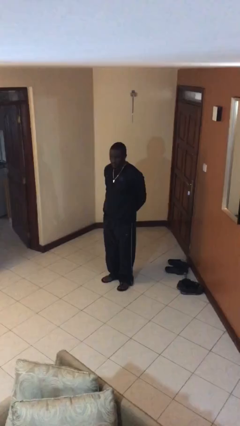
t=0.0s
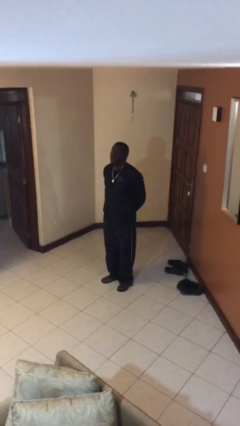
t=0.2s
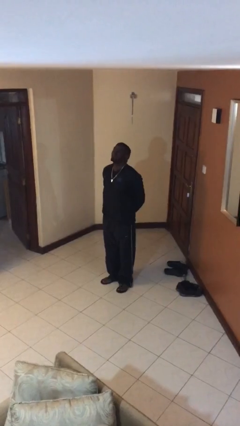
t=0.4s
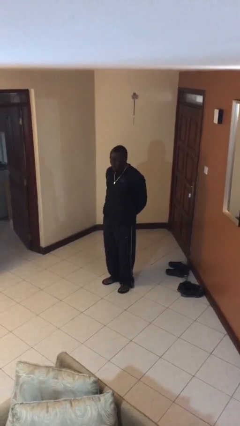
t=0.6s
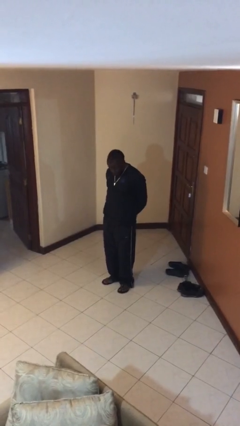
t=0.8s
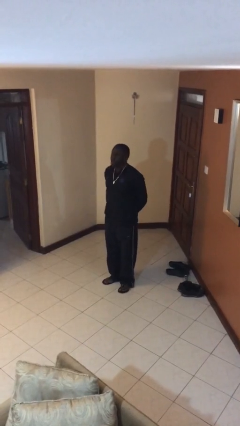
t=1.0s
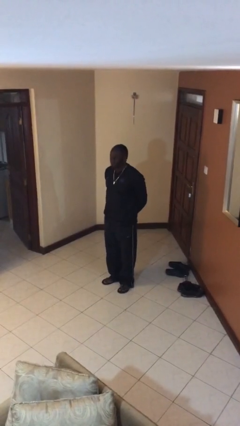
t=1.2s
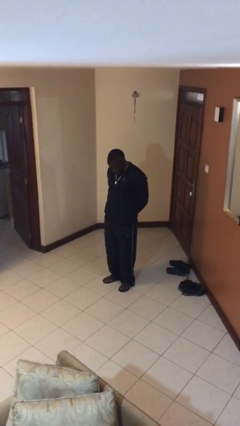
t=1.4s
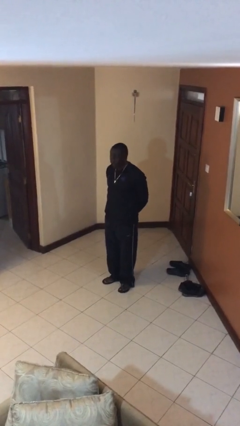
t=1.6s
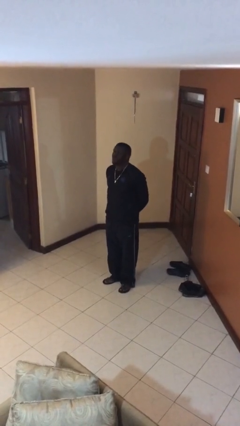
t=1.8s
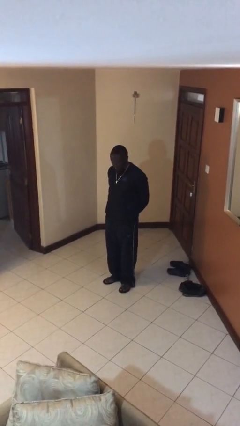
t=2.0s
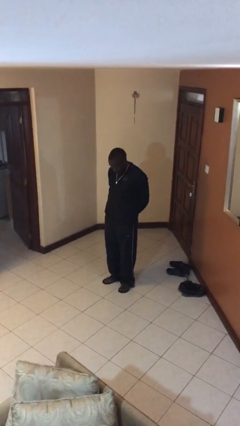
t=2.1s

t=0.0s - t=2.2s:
person nods head

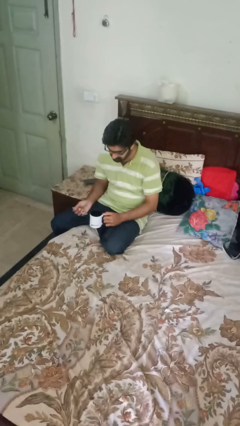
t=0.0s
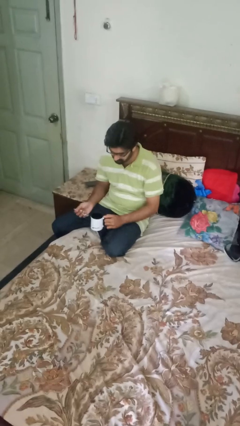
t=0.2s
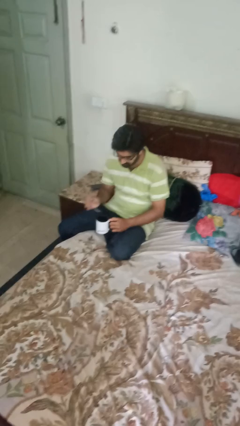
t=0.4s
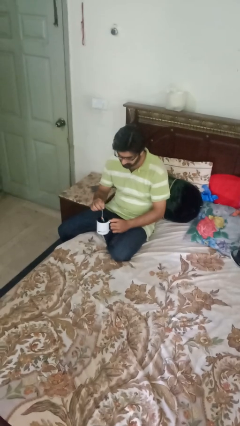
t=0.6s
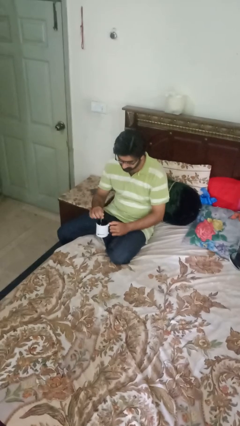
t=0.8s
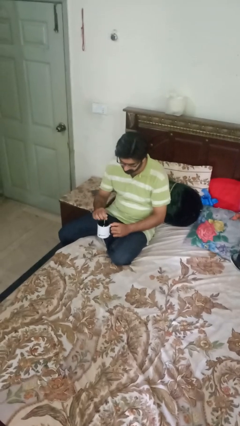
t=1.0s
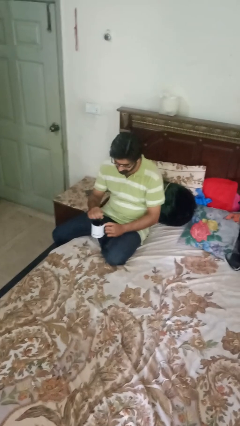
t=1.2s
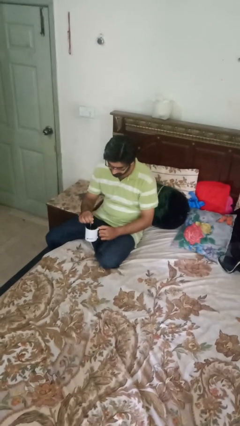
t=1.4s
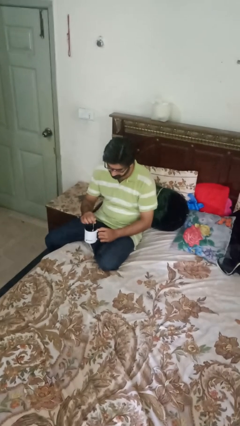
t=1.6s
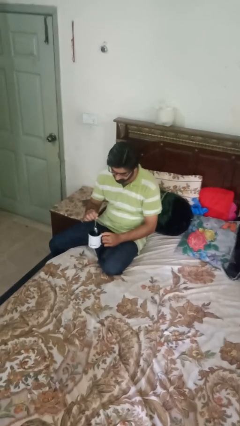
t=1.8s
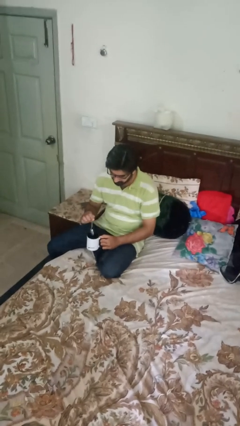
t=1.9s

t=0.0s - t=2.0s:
person stirs mug

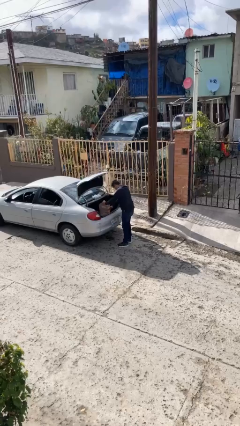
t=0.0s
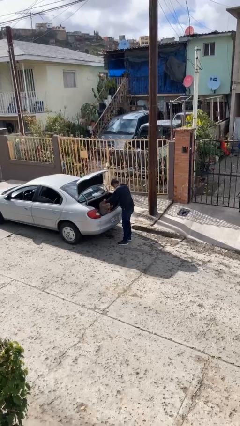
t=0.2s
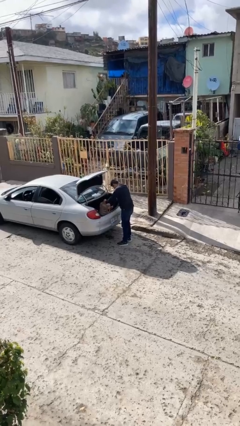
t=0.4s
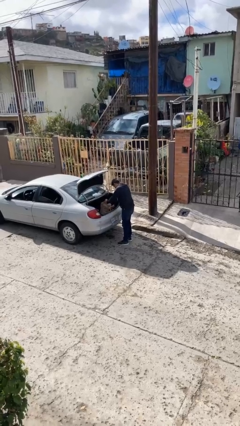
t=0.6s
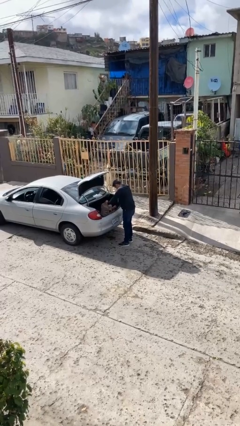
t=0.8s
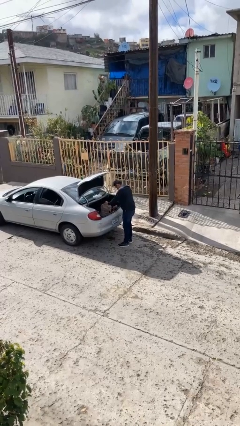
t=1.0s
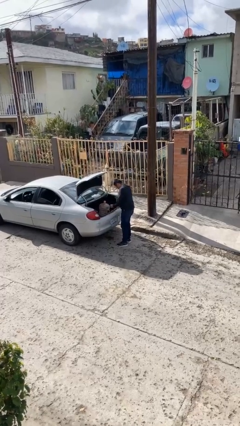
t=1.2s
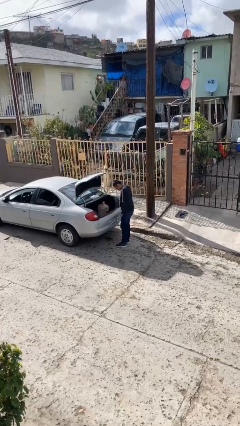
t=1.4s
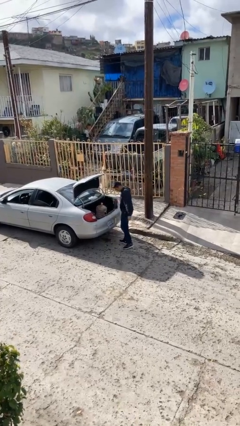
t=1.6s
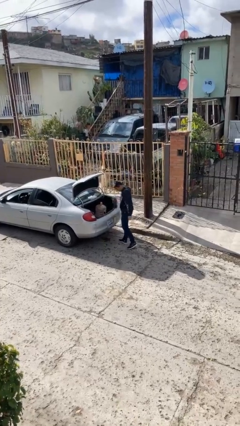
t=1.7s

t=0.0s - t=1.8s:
person loads car

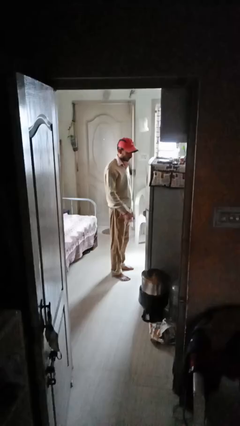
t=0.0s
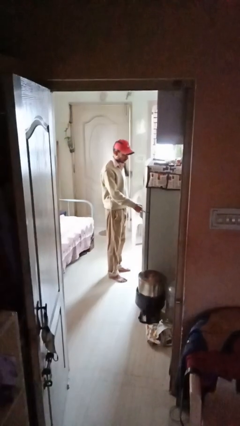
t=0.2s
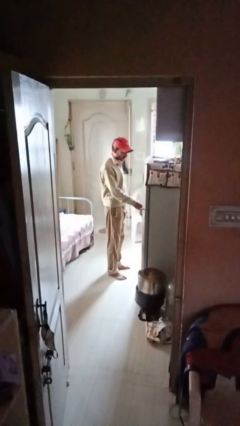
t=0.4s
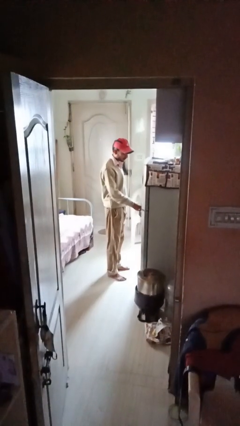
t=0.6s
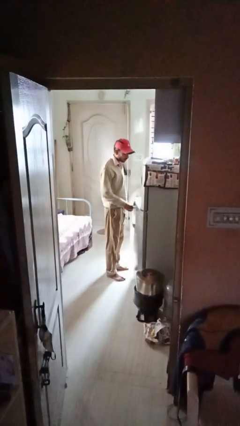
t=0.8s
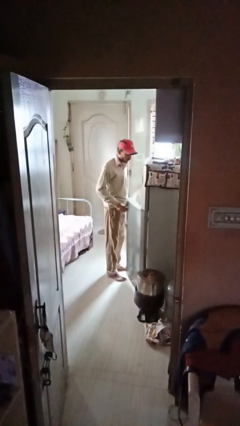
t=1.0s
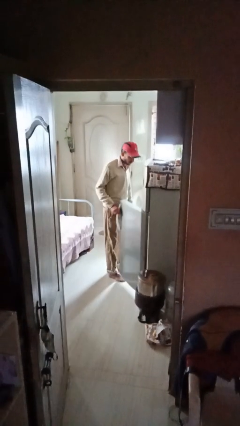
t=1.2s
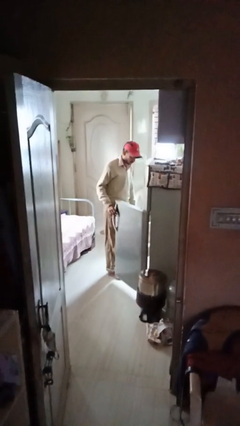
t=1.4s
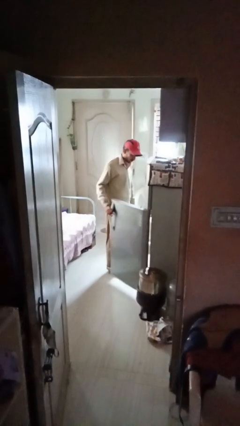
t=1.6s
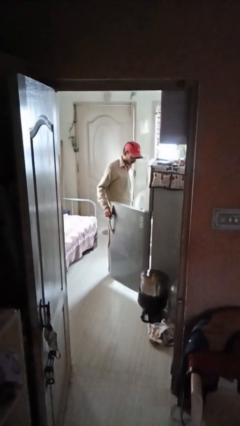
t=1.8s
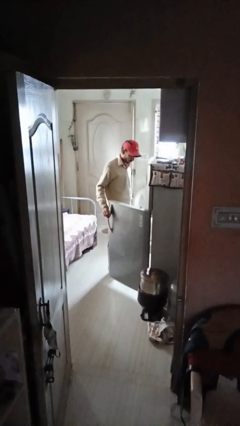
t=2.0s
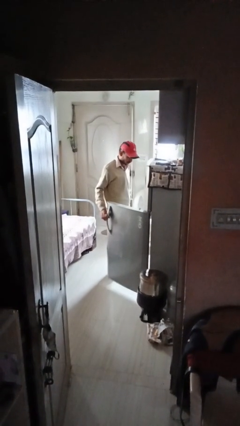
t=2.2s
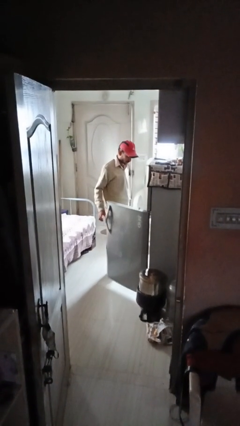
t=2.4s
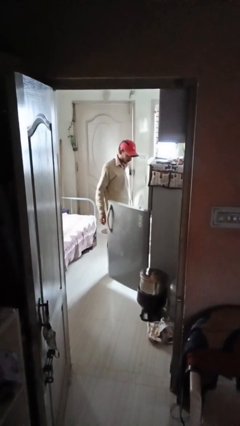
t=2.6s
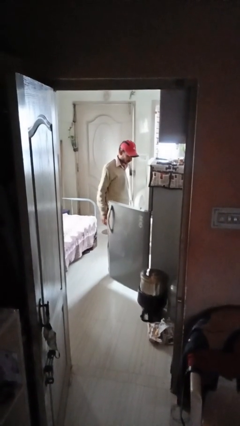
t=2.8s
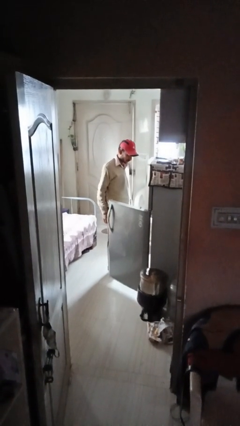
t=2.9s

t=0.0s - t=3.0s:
person opens refrigerator

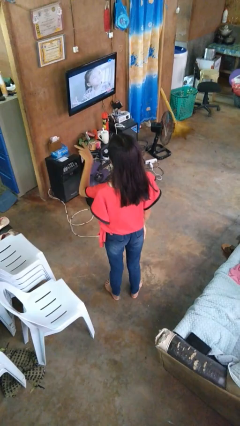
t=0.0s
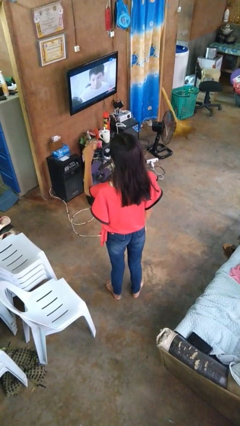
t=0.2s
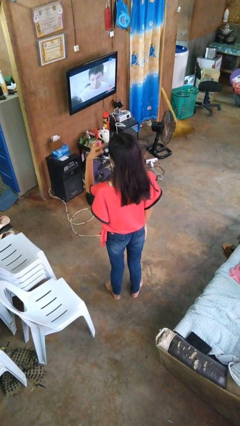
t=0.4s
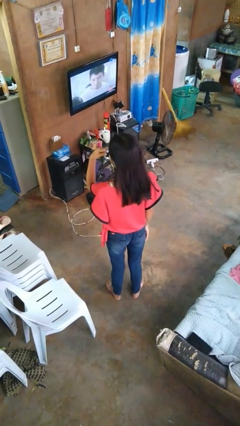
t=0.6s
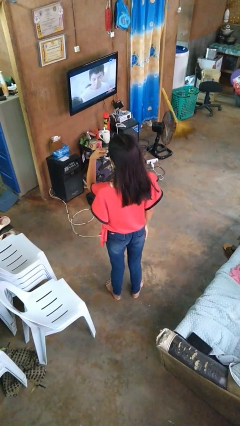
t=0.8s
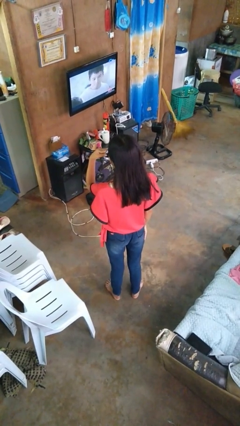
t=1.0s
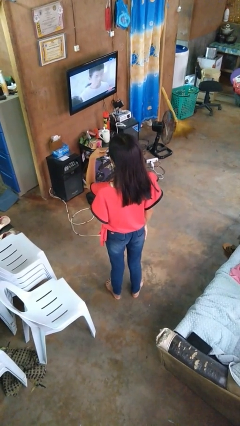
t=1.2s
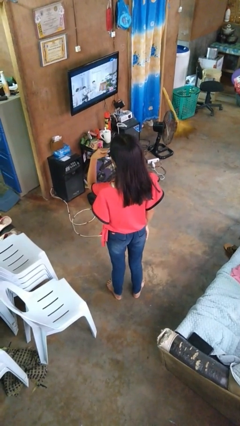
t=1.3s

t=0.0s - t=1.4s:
person gestures watch closely

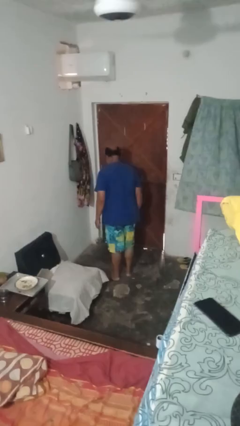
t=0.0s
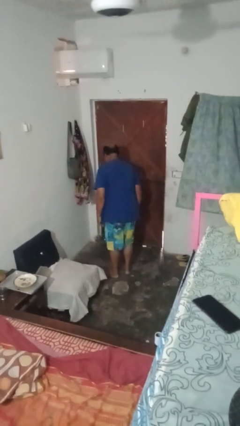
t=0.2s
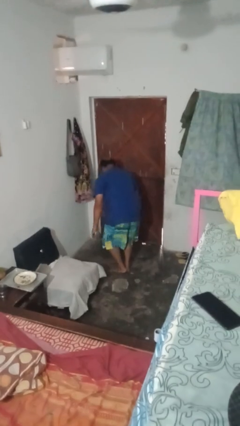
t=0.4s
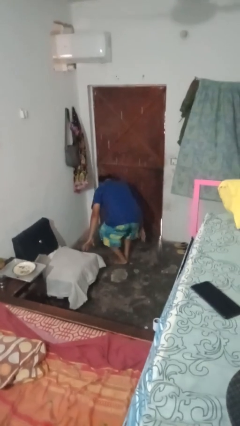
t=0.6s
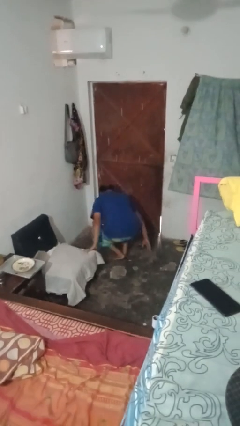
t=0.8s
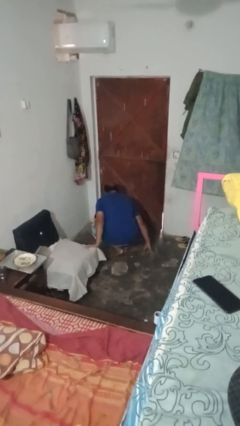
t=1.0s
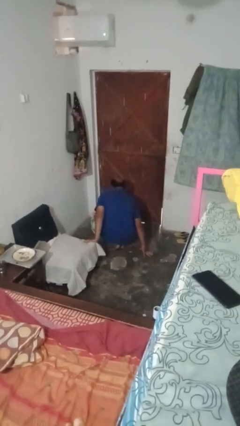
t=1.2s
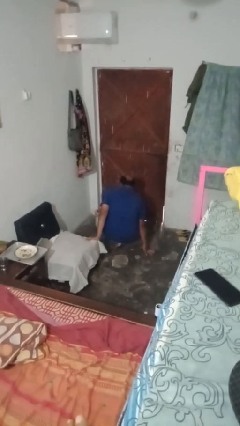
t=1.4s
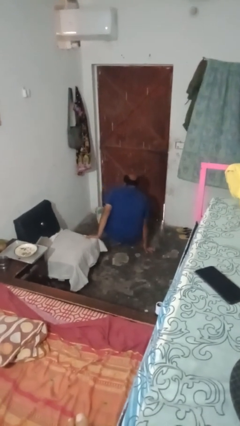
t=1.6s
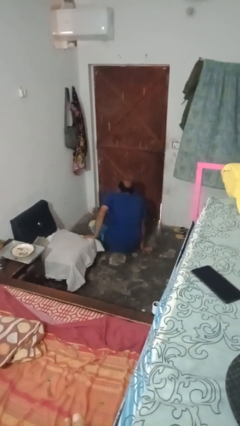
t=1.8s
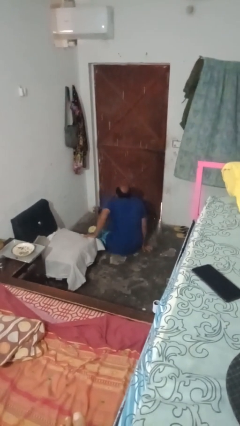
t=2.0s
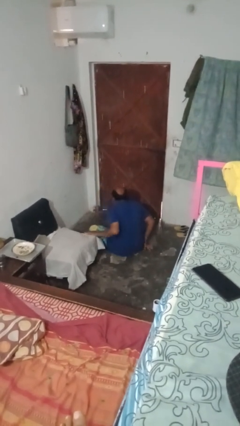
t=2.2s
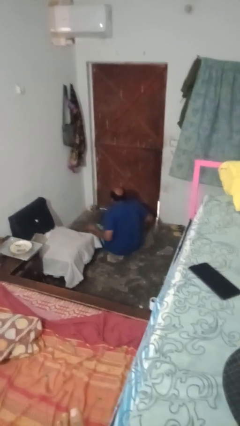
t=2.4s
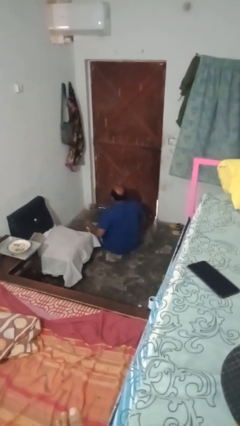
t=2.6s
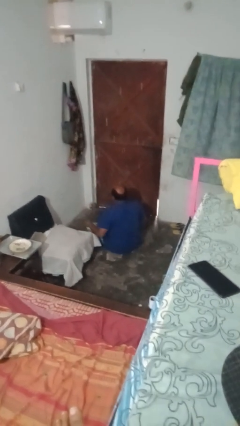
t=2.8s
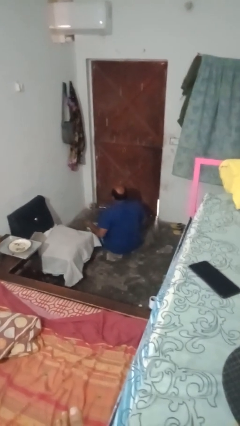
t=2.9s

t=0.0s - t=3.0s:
person crosses legs

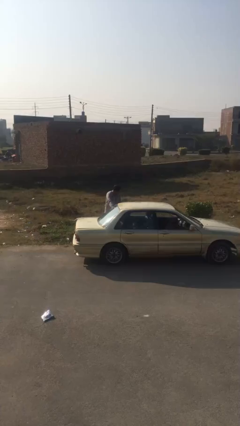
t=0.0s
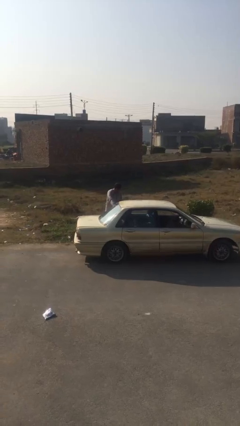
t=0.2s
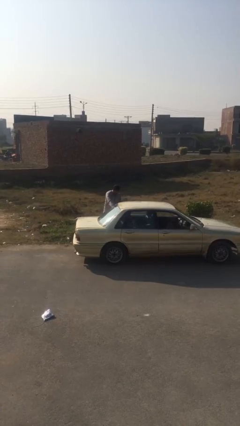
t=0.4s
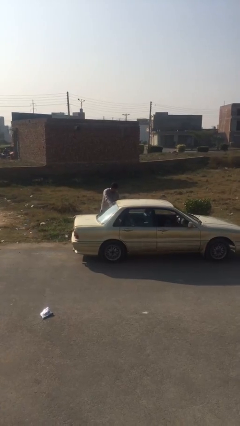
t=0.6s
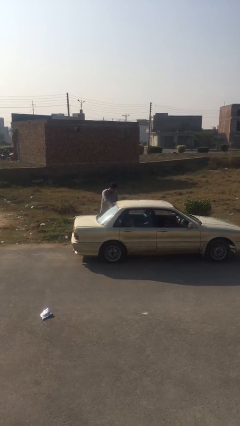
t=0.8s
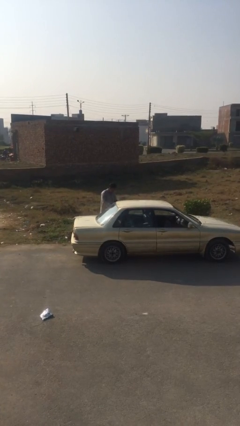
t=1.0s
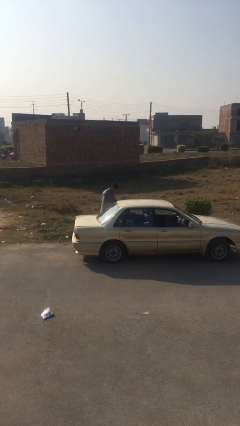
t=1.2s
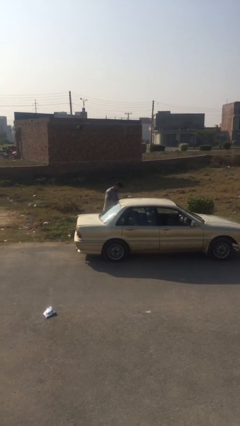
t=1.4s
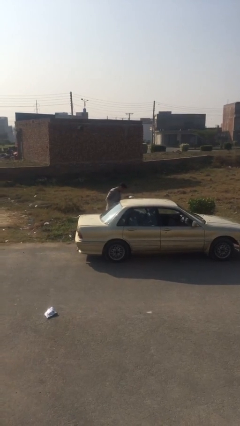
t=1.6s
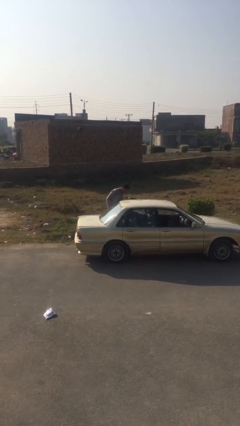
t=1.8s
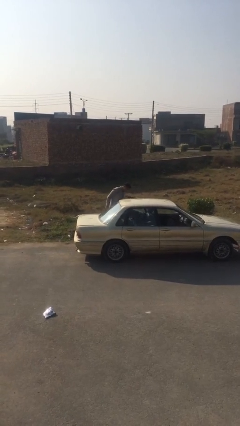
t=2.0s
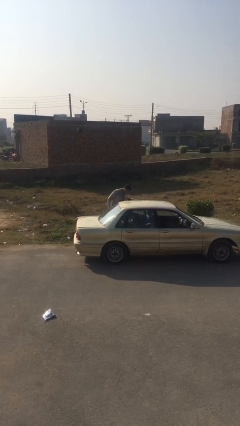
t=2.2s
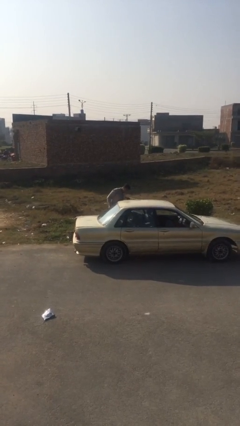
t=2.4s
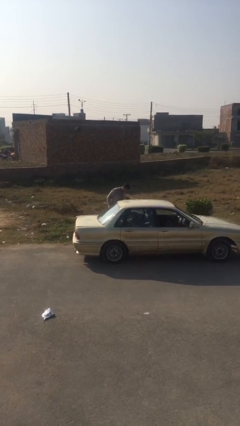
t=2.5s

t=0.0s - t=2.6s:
person opens car door

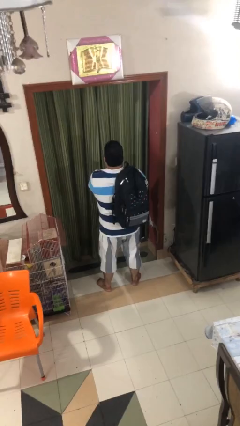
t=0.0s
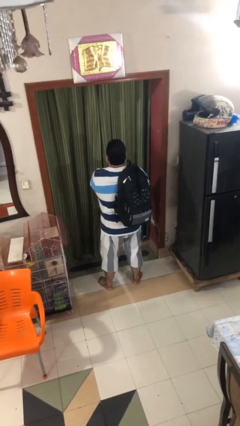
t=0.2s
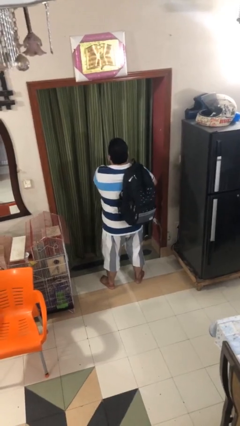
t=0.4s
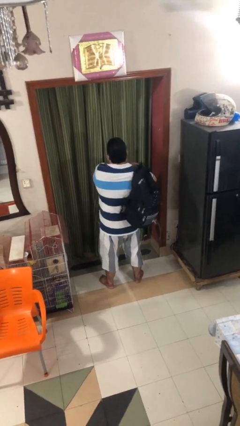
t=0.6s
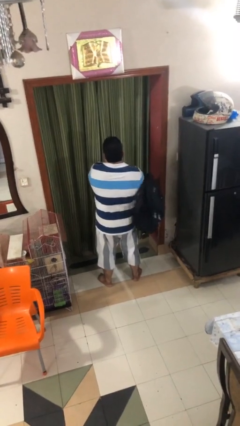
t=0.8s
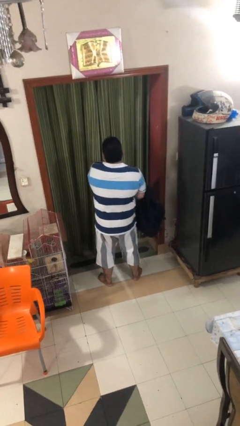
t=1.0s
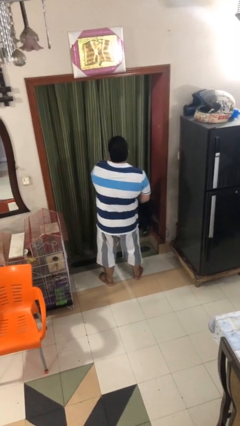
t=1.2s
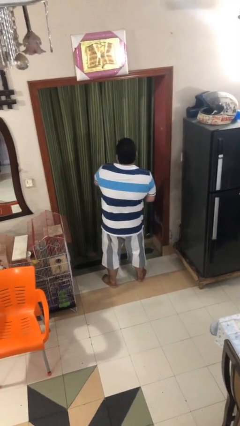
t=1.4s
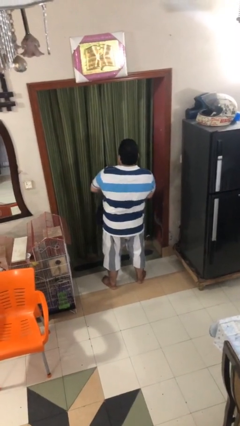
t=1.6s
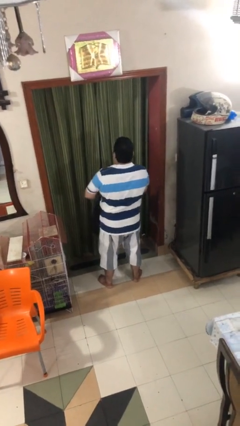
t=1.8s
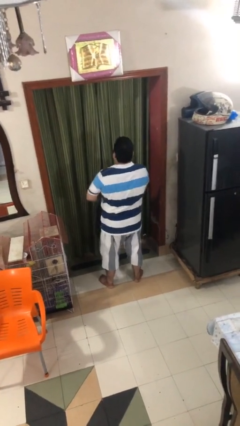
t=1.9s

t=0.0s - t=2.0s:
person takes off backpack
